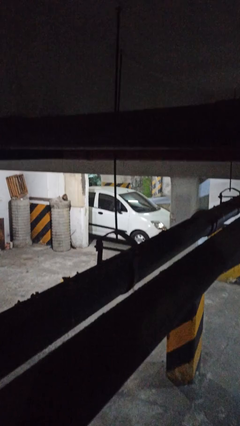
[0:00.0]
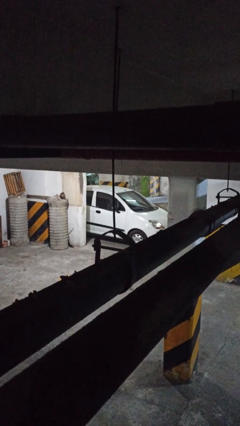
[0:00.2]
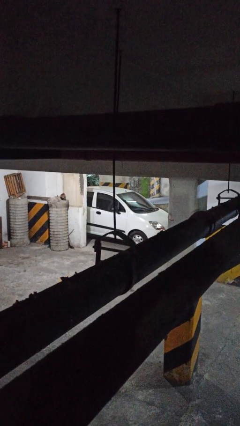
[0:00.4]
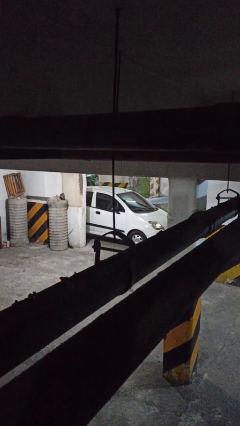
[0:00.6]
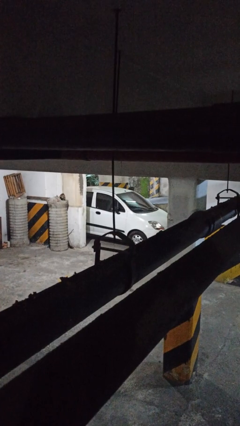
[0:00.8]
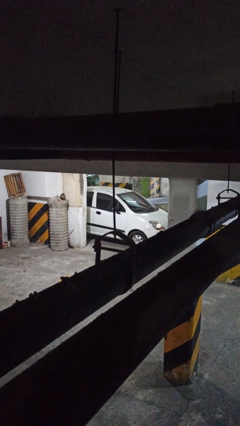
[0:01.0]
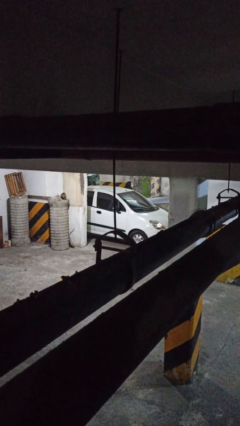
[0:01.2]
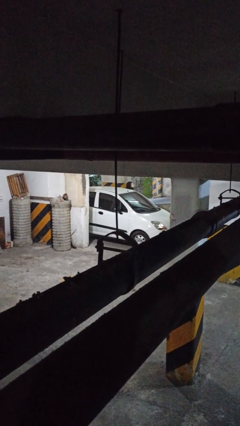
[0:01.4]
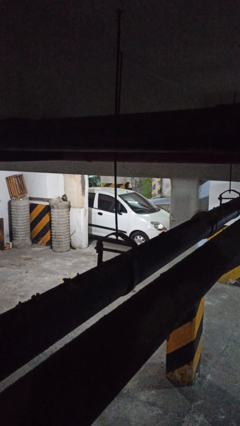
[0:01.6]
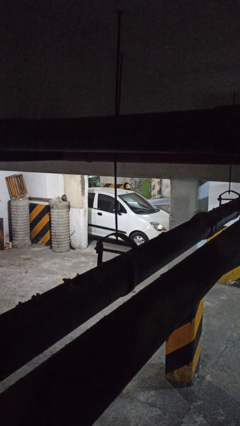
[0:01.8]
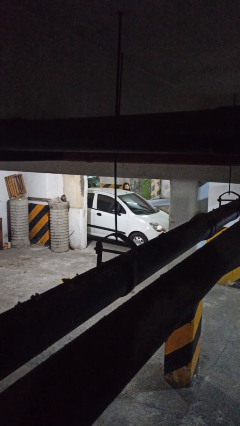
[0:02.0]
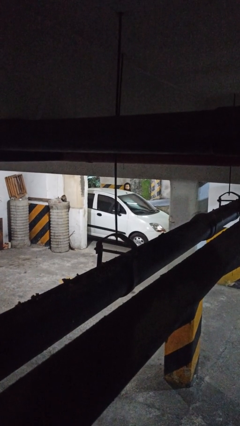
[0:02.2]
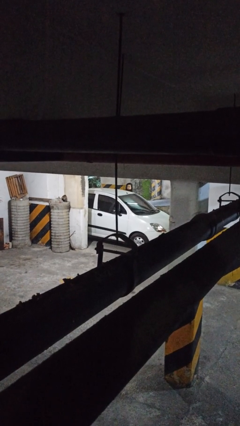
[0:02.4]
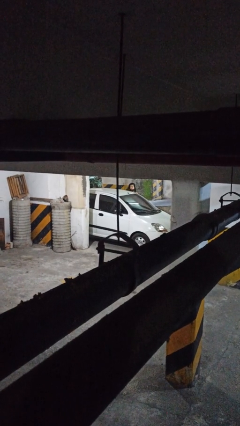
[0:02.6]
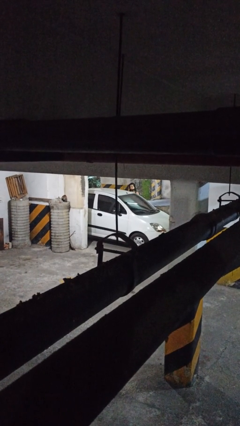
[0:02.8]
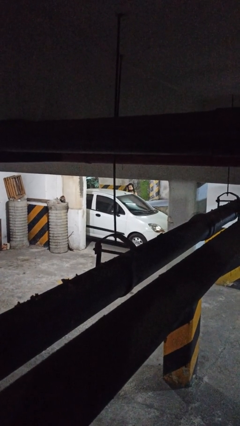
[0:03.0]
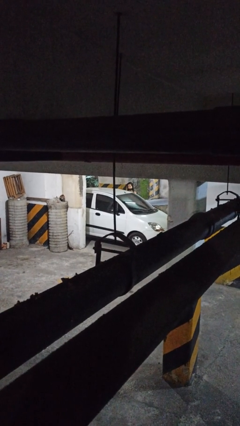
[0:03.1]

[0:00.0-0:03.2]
car drops off person

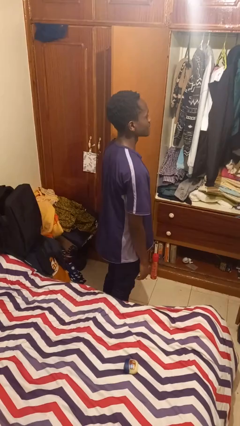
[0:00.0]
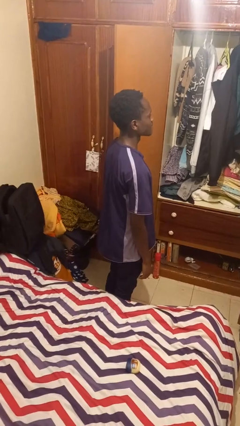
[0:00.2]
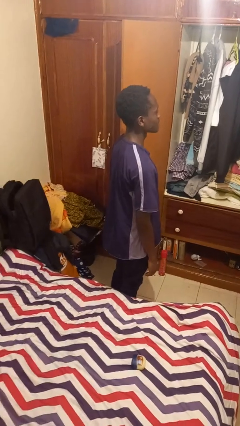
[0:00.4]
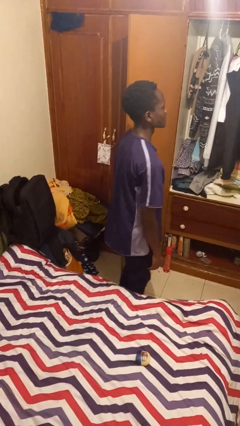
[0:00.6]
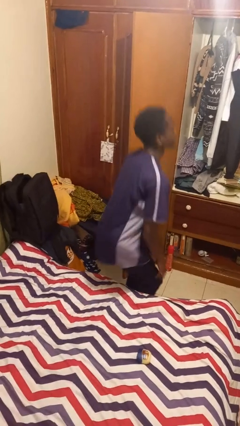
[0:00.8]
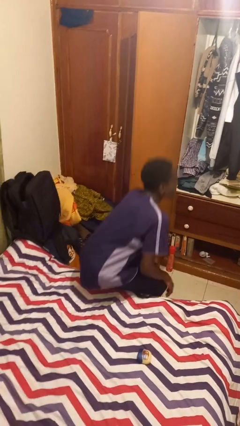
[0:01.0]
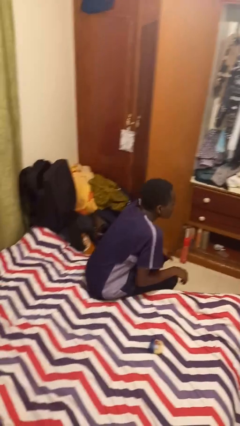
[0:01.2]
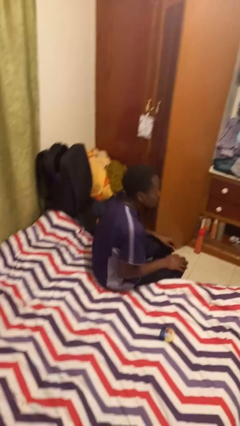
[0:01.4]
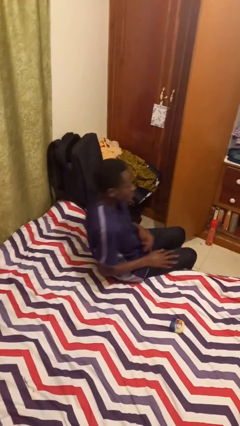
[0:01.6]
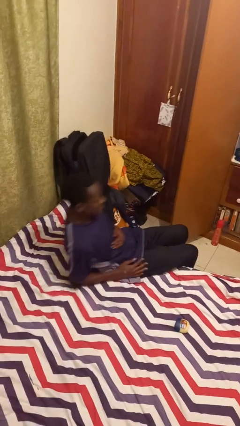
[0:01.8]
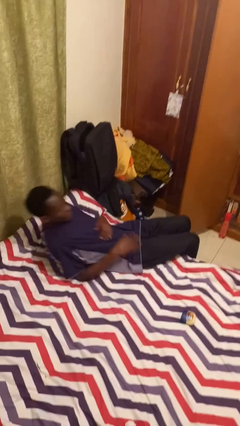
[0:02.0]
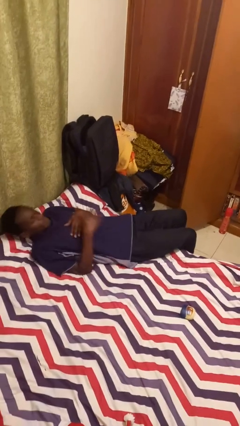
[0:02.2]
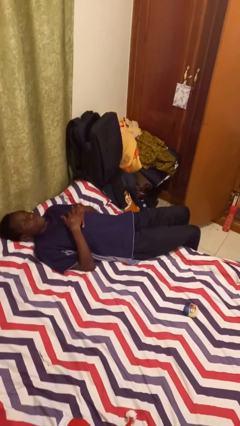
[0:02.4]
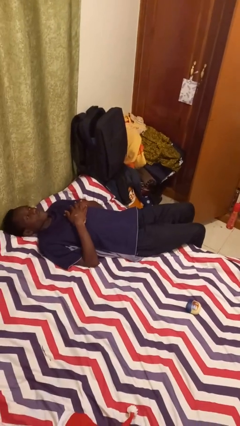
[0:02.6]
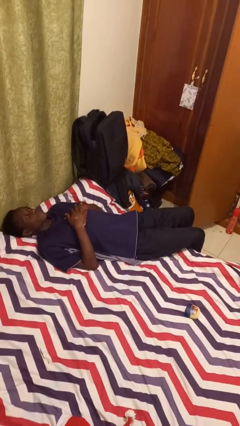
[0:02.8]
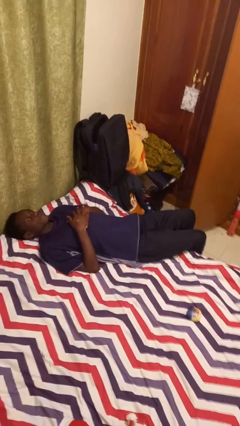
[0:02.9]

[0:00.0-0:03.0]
person lies down on bed

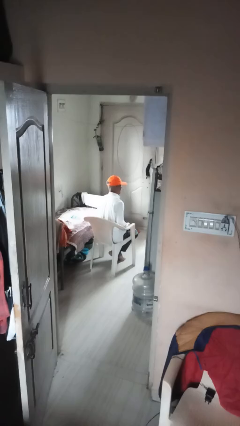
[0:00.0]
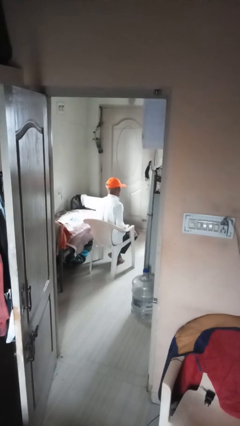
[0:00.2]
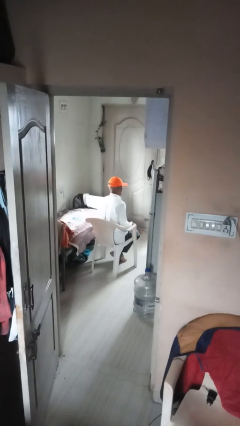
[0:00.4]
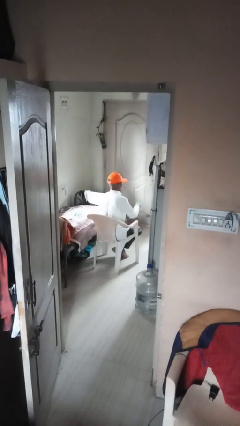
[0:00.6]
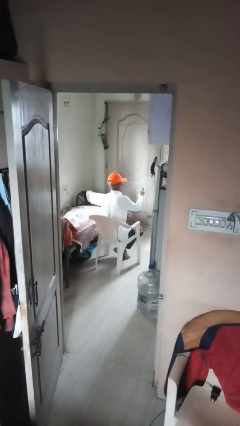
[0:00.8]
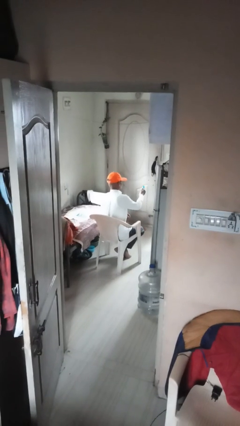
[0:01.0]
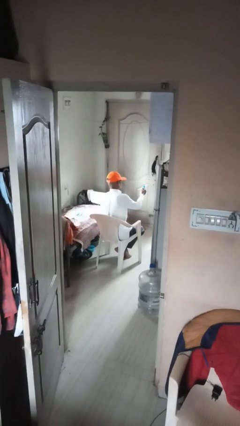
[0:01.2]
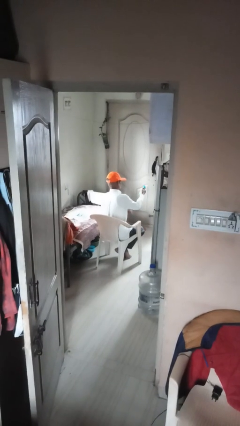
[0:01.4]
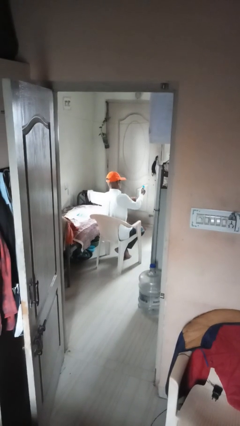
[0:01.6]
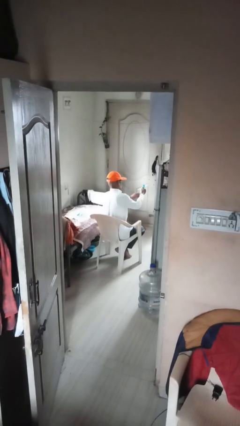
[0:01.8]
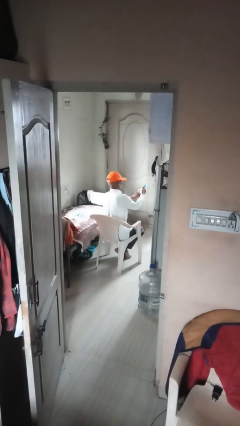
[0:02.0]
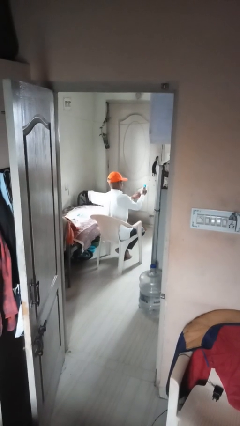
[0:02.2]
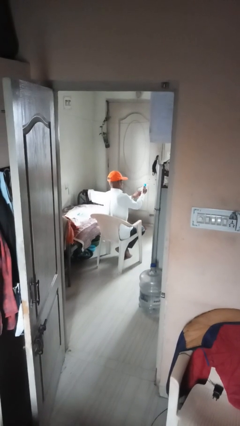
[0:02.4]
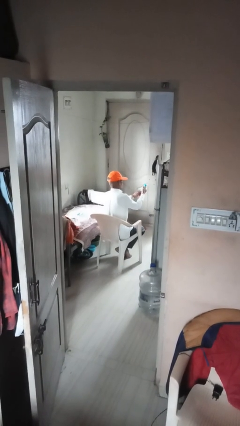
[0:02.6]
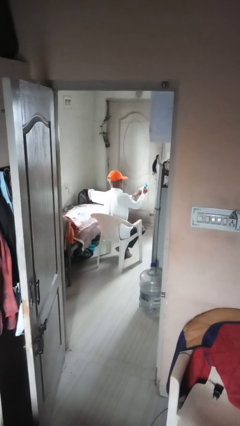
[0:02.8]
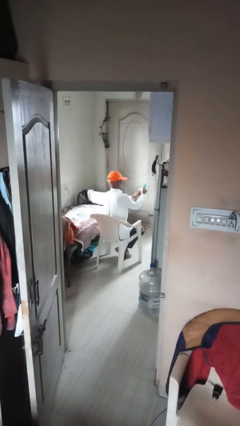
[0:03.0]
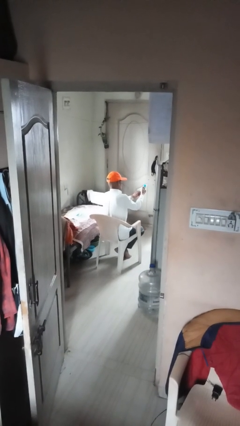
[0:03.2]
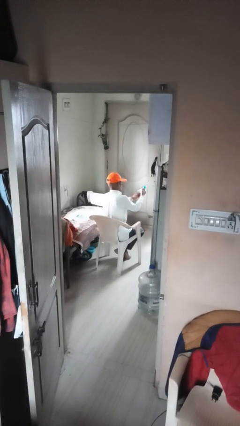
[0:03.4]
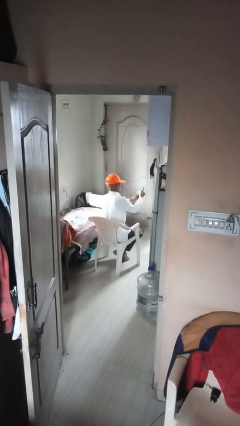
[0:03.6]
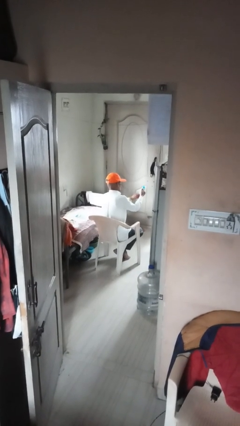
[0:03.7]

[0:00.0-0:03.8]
person squeezes object

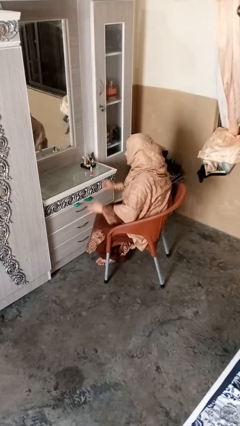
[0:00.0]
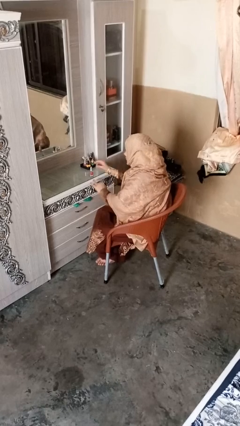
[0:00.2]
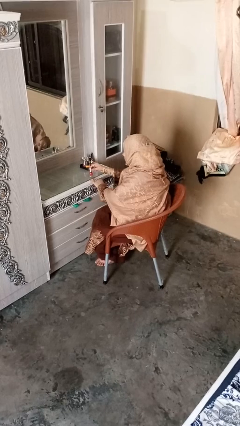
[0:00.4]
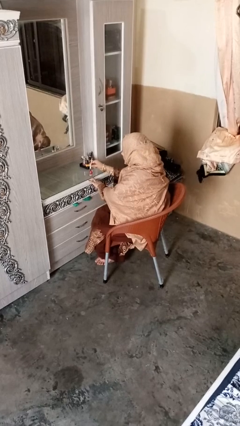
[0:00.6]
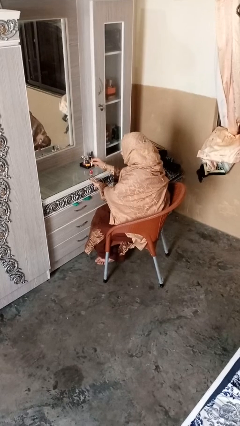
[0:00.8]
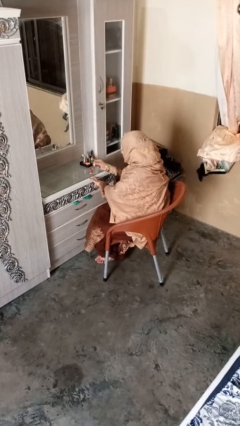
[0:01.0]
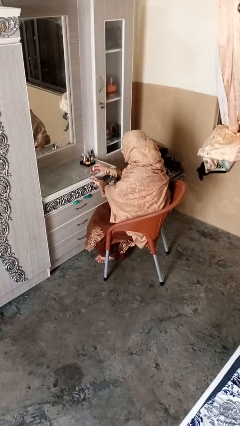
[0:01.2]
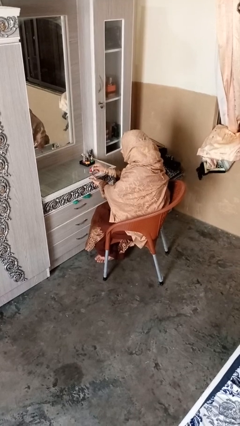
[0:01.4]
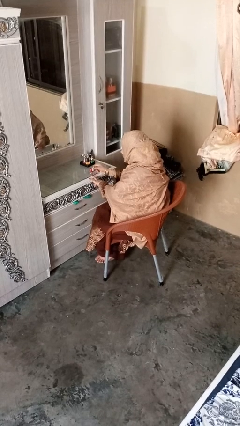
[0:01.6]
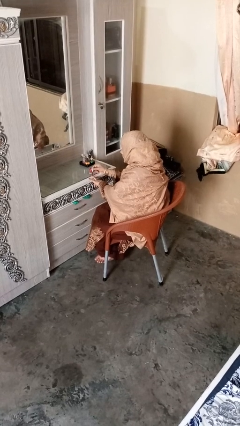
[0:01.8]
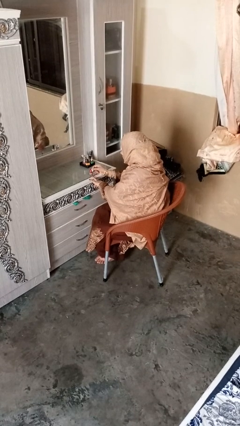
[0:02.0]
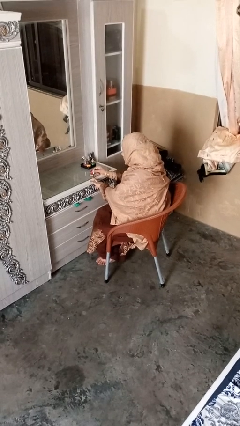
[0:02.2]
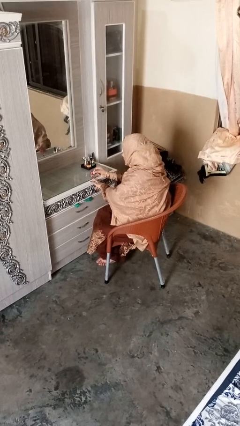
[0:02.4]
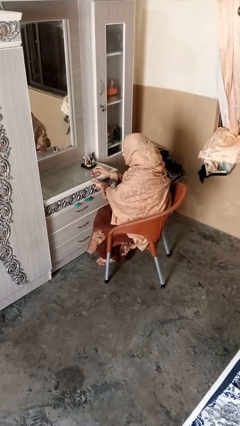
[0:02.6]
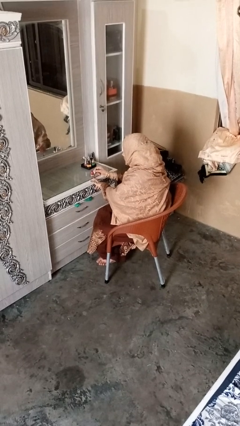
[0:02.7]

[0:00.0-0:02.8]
person paints fingernails

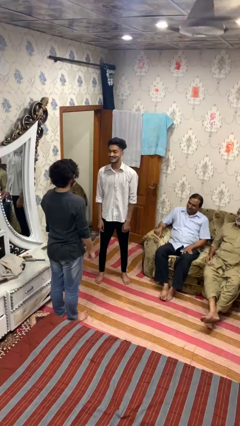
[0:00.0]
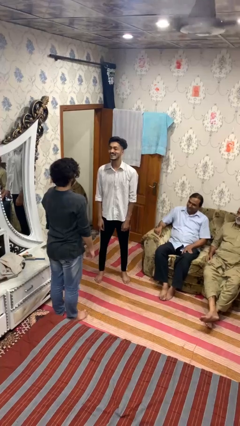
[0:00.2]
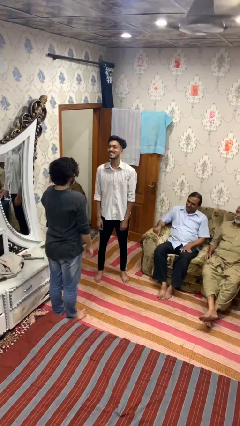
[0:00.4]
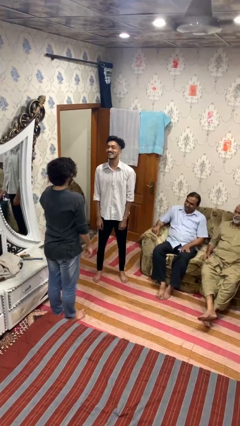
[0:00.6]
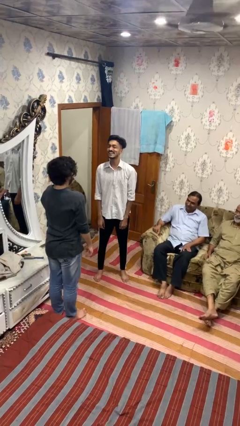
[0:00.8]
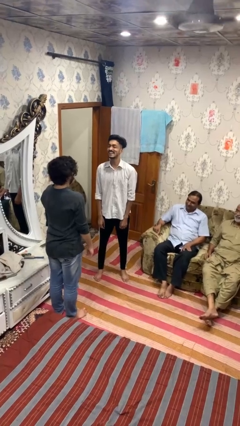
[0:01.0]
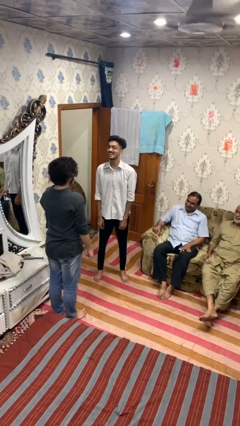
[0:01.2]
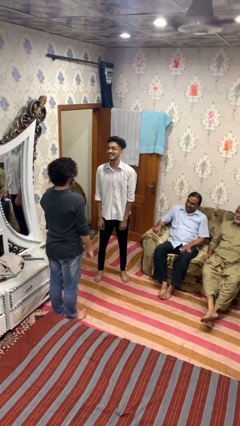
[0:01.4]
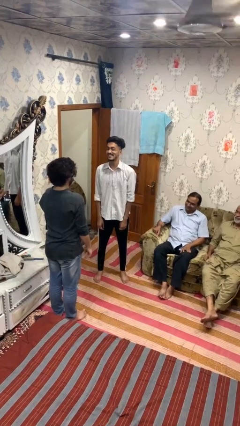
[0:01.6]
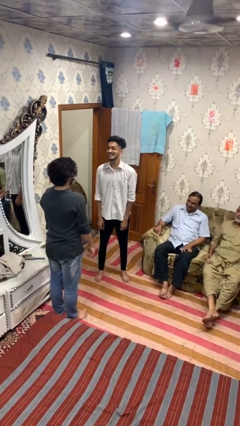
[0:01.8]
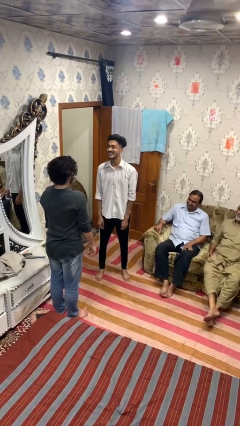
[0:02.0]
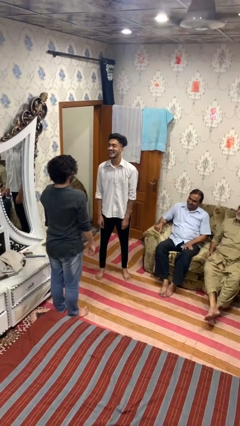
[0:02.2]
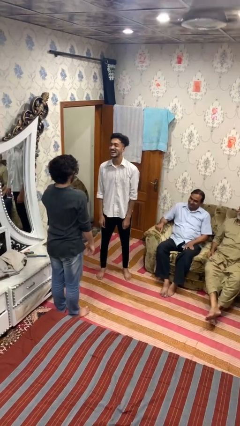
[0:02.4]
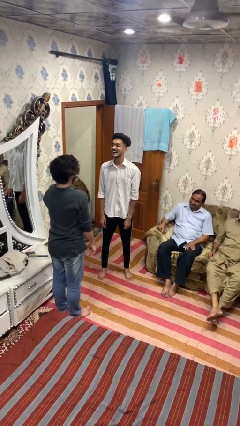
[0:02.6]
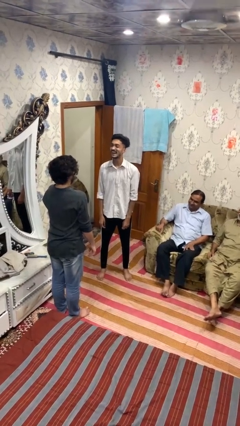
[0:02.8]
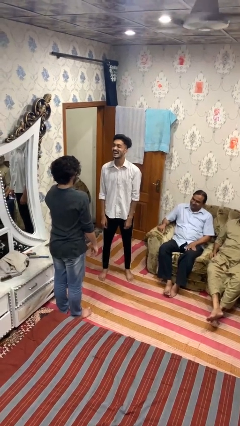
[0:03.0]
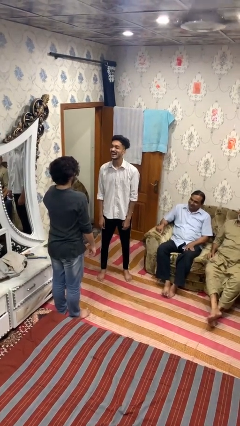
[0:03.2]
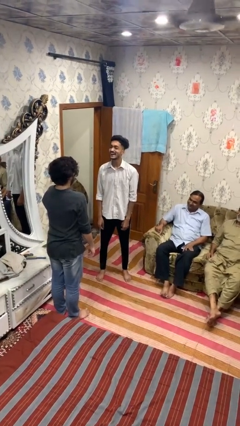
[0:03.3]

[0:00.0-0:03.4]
person laughs with person

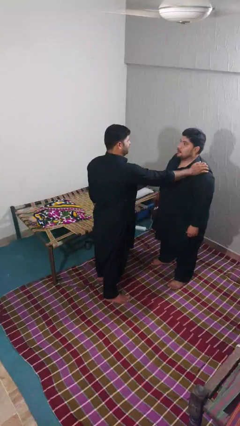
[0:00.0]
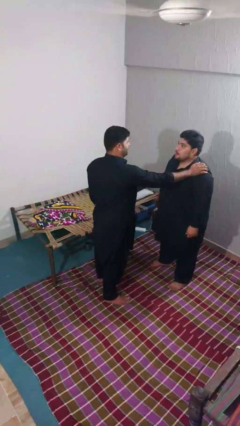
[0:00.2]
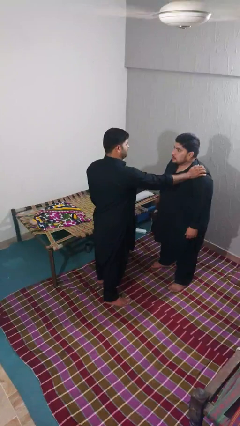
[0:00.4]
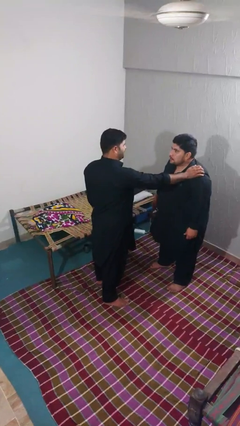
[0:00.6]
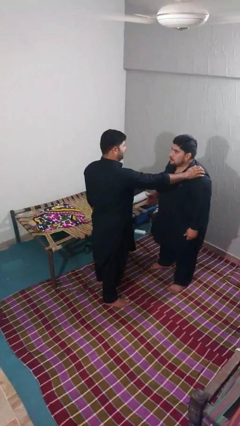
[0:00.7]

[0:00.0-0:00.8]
person pounds shoulders of person

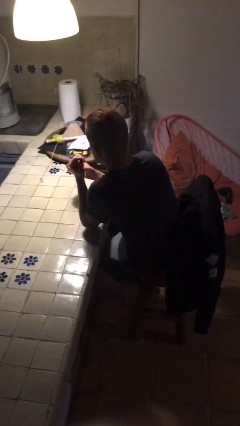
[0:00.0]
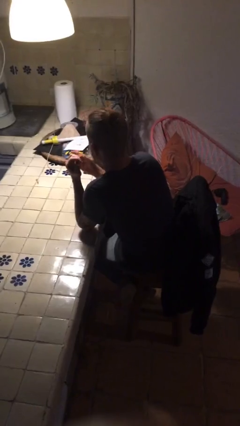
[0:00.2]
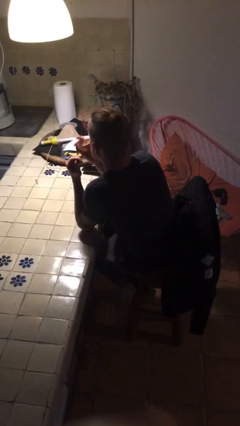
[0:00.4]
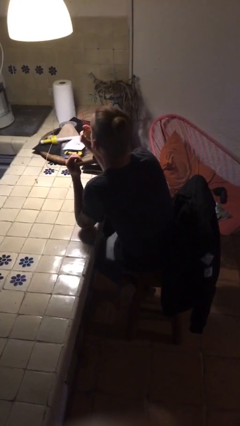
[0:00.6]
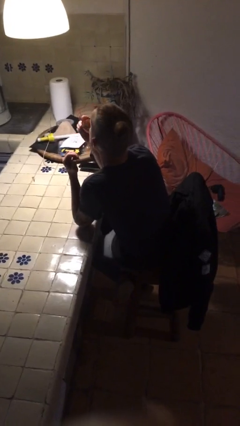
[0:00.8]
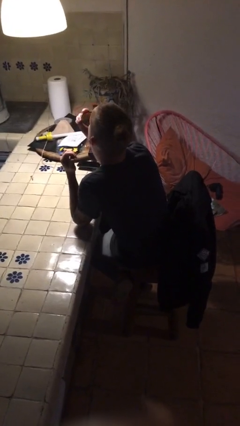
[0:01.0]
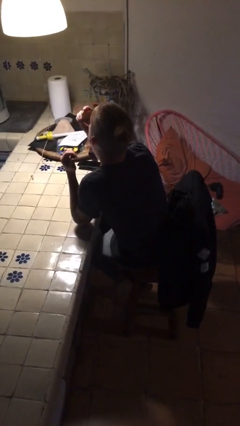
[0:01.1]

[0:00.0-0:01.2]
person drinks from shotglass
